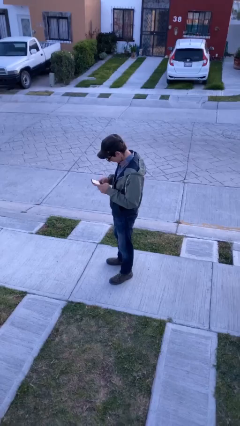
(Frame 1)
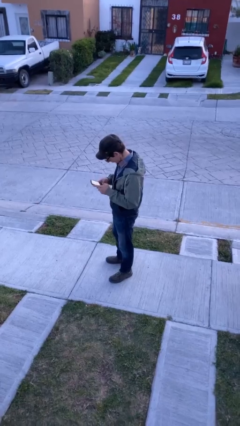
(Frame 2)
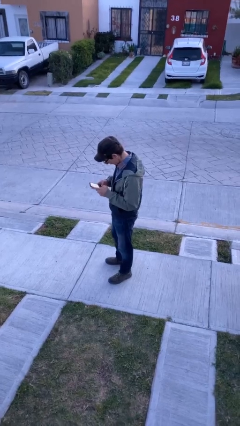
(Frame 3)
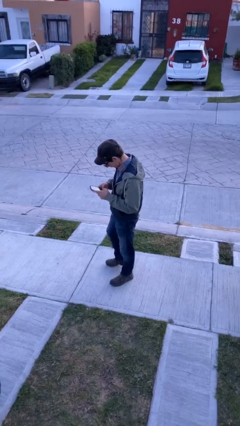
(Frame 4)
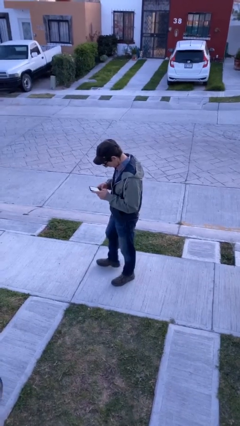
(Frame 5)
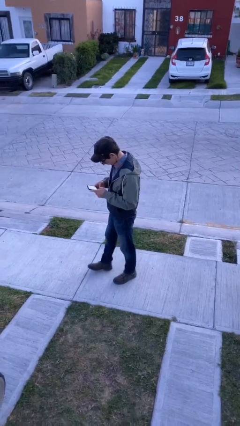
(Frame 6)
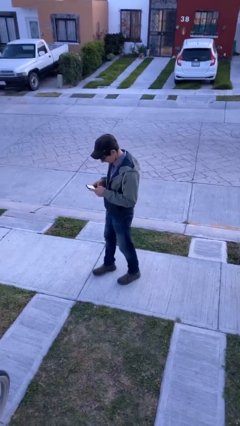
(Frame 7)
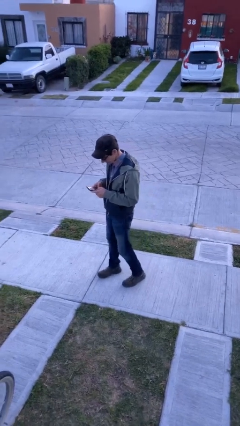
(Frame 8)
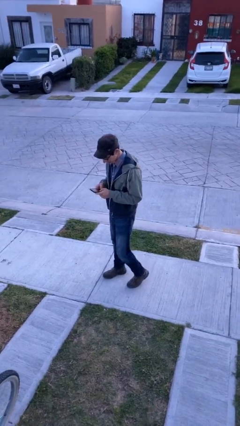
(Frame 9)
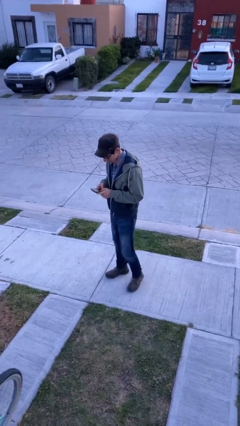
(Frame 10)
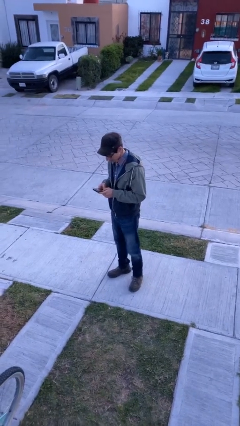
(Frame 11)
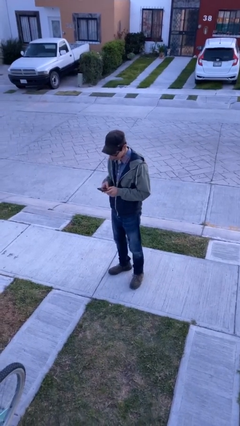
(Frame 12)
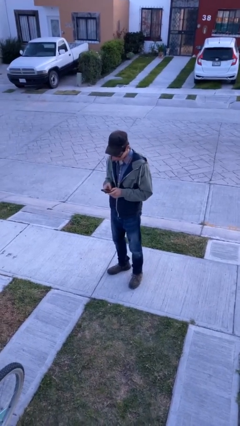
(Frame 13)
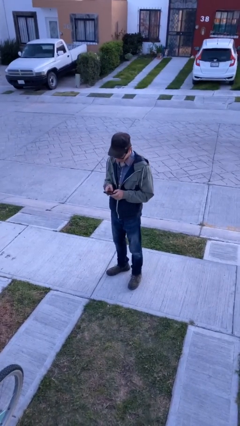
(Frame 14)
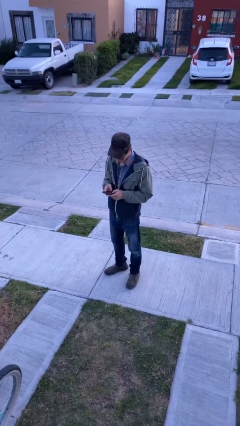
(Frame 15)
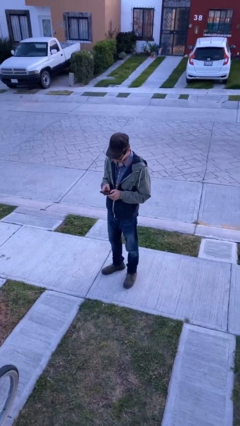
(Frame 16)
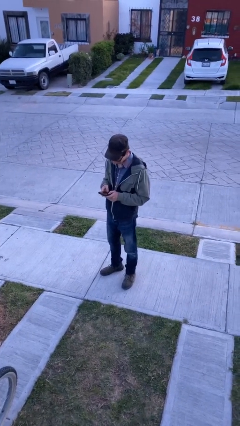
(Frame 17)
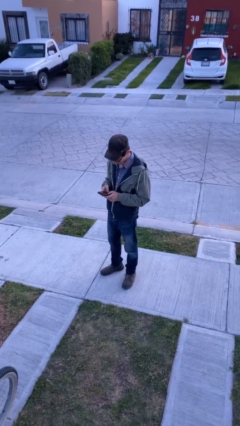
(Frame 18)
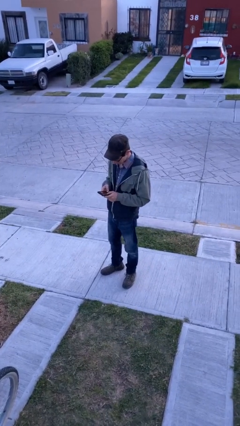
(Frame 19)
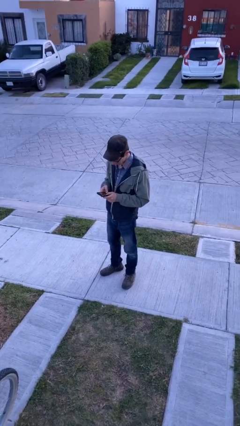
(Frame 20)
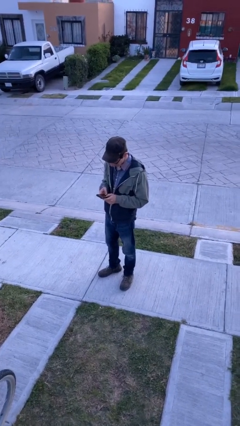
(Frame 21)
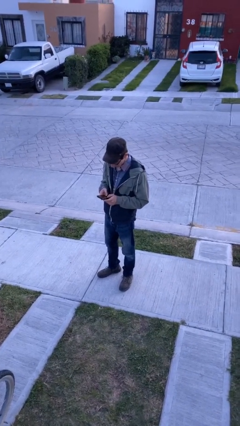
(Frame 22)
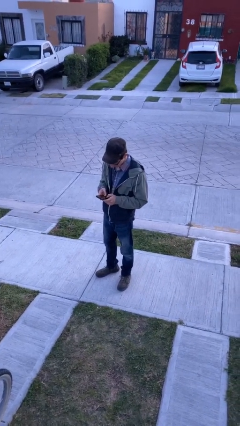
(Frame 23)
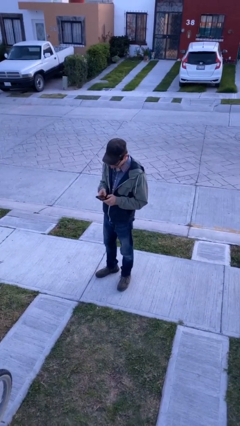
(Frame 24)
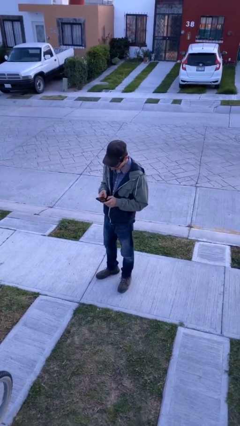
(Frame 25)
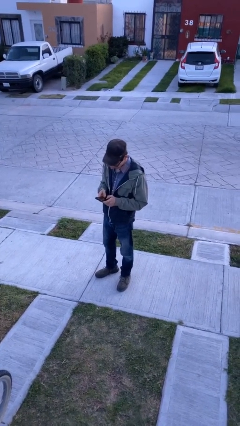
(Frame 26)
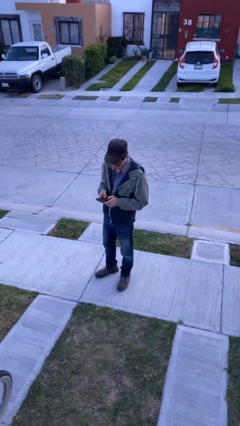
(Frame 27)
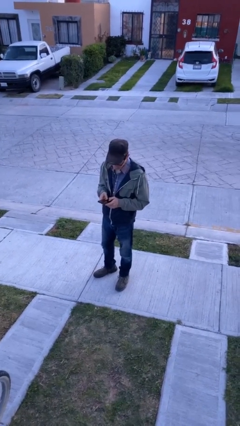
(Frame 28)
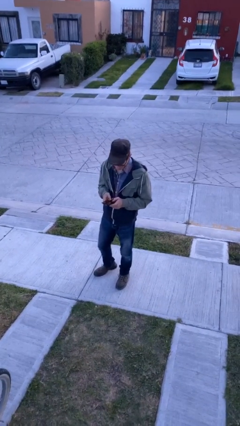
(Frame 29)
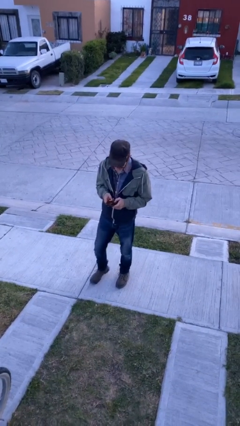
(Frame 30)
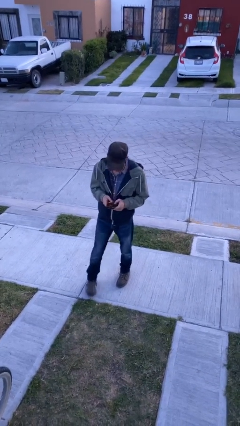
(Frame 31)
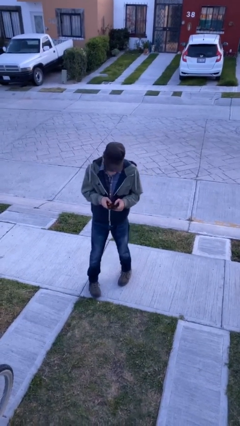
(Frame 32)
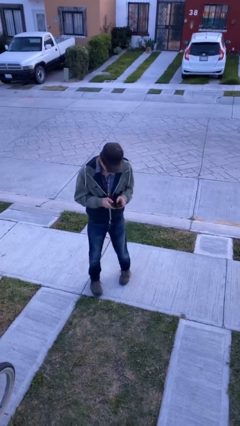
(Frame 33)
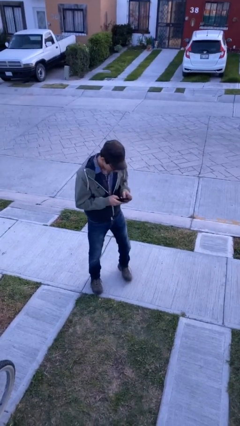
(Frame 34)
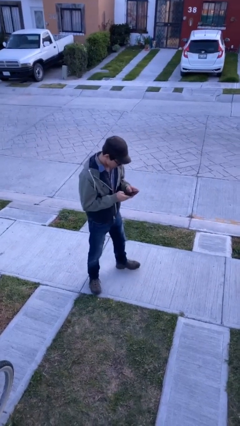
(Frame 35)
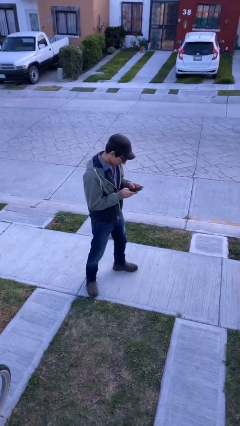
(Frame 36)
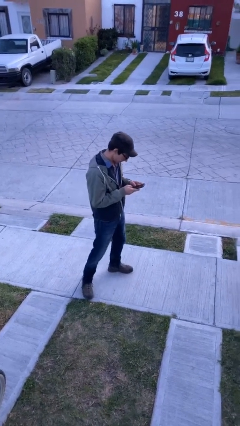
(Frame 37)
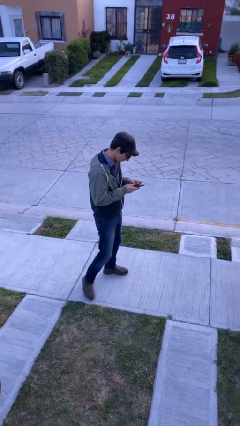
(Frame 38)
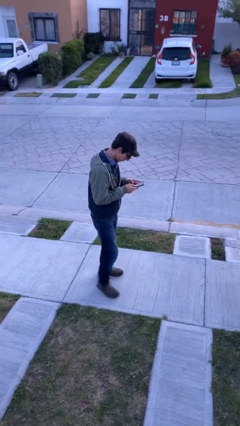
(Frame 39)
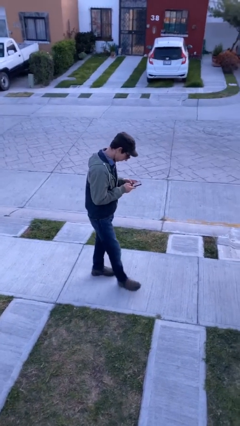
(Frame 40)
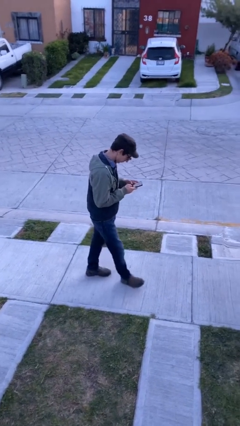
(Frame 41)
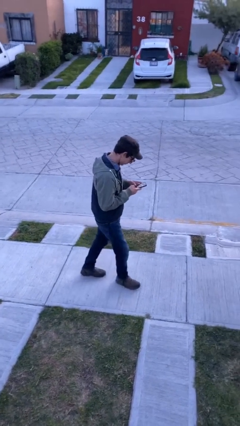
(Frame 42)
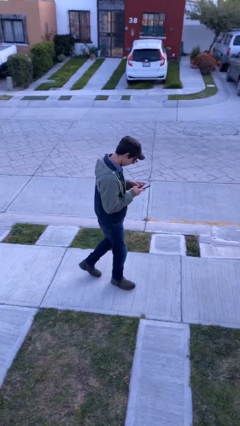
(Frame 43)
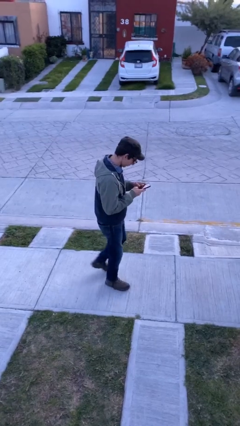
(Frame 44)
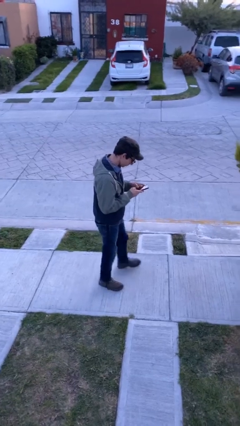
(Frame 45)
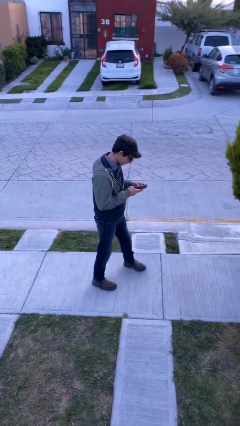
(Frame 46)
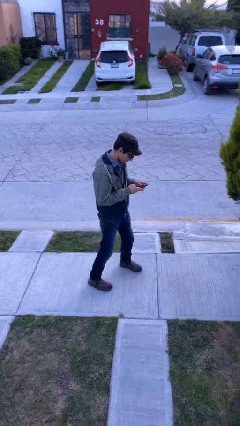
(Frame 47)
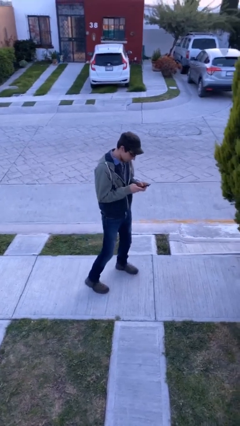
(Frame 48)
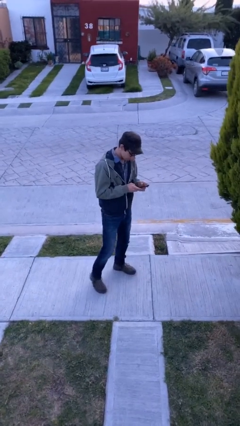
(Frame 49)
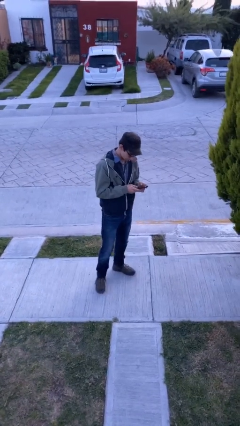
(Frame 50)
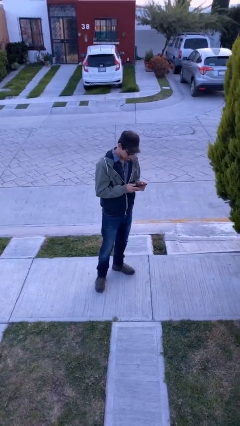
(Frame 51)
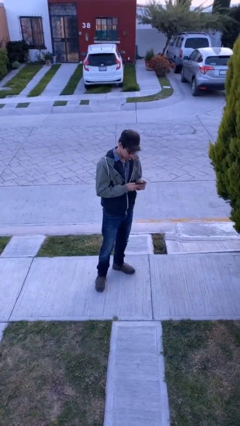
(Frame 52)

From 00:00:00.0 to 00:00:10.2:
person texts on phone

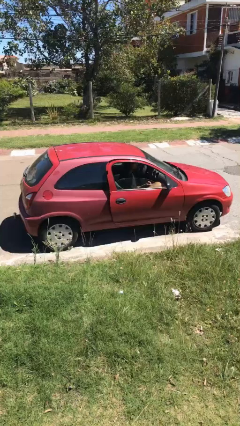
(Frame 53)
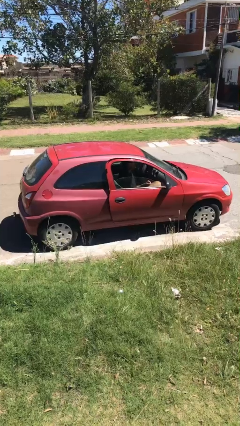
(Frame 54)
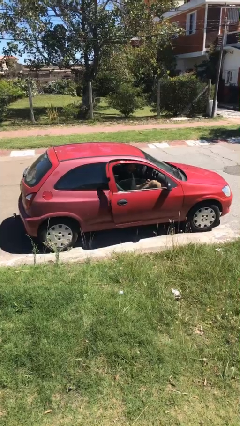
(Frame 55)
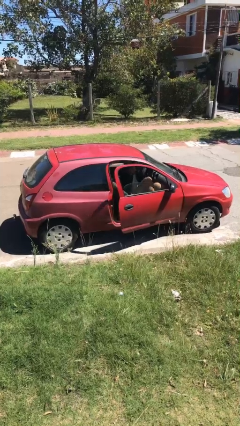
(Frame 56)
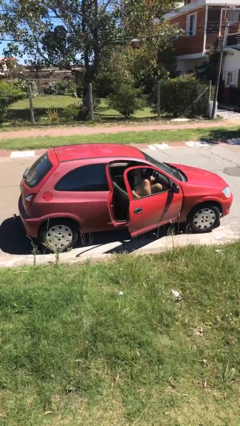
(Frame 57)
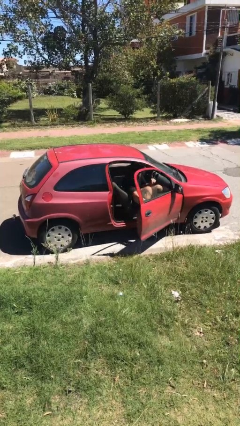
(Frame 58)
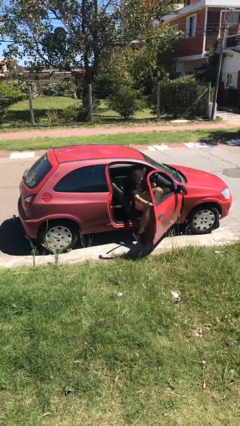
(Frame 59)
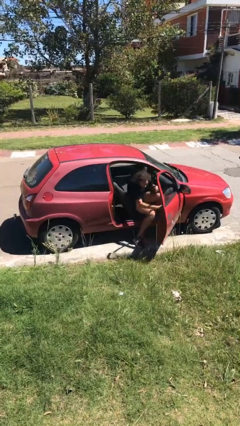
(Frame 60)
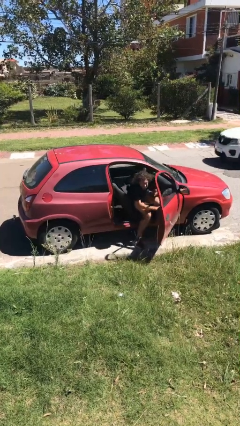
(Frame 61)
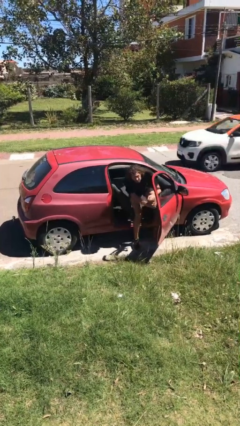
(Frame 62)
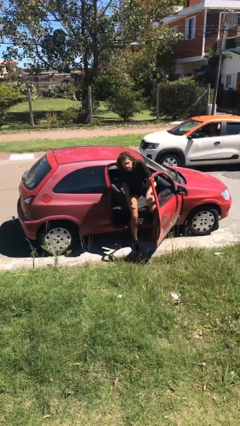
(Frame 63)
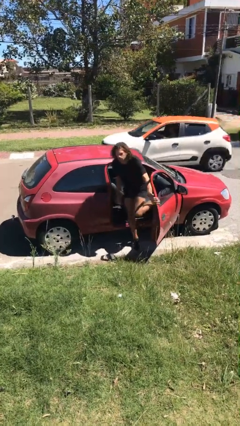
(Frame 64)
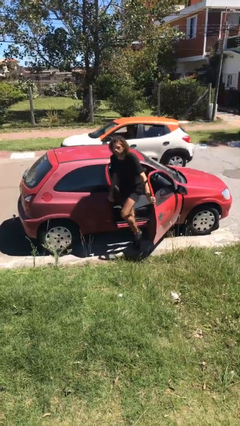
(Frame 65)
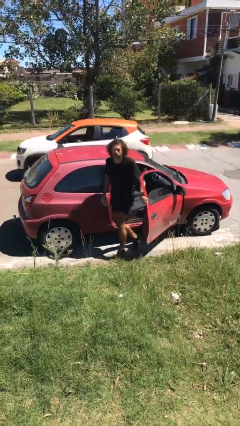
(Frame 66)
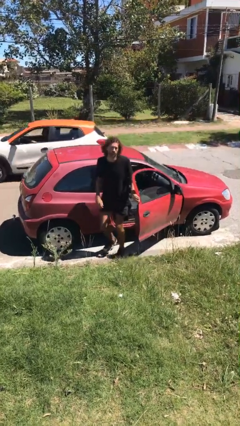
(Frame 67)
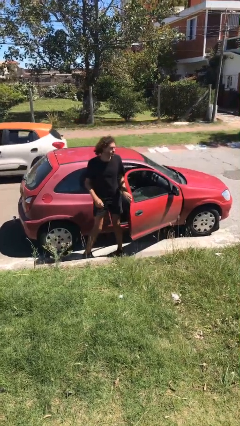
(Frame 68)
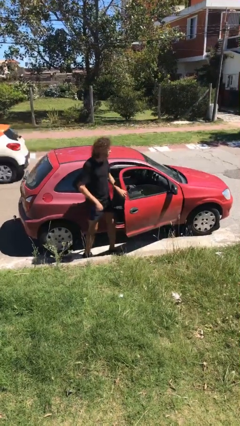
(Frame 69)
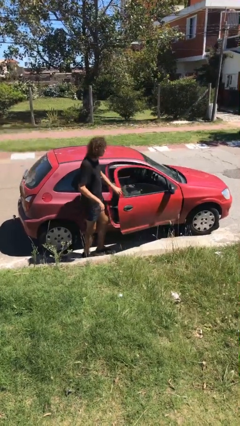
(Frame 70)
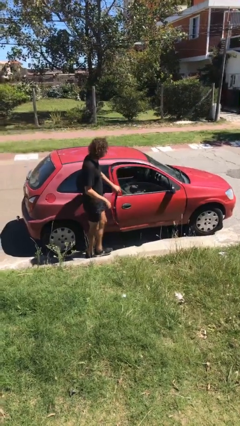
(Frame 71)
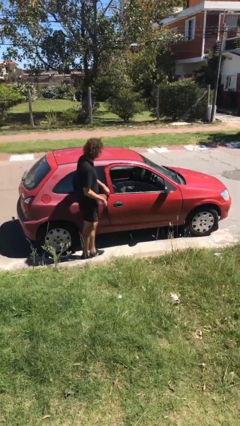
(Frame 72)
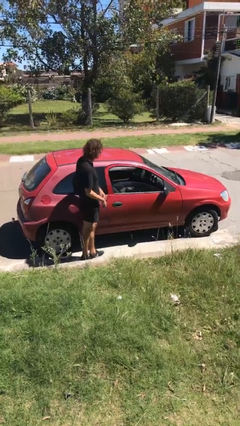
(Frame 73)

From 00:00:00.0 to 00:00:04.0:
car drops off person

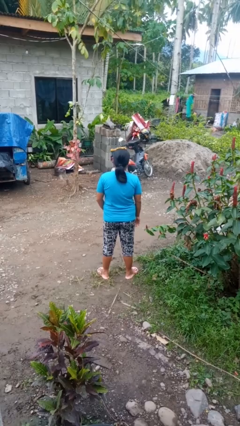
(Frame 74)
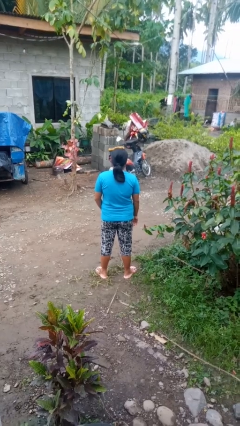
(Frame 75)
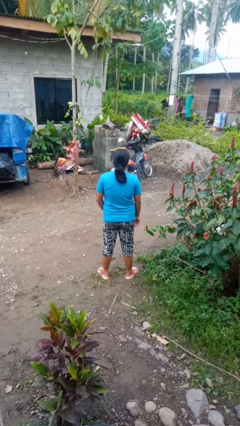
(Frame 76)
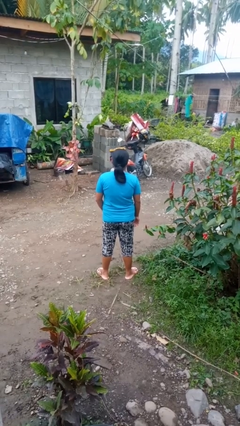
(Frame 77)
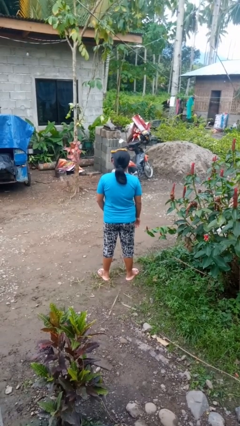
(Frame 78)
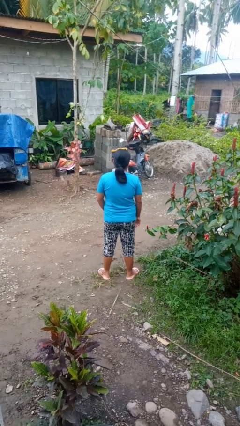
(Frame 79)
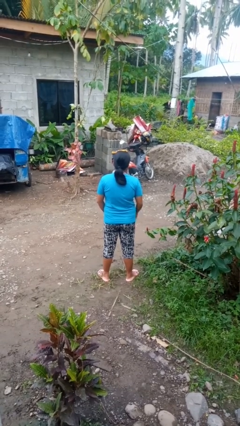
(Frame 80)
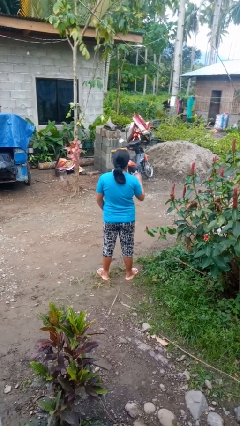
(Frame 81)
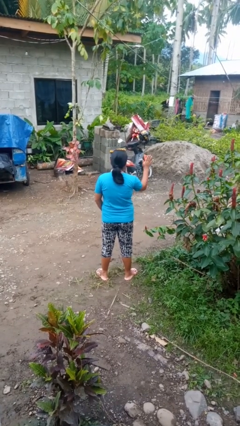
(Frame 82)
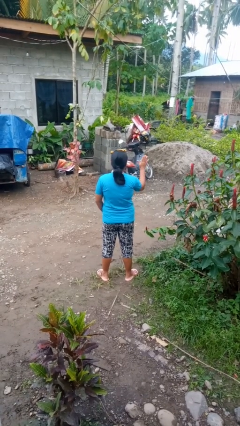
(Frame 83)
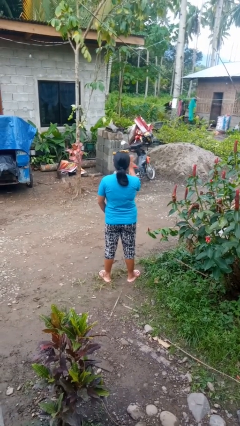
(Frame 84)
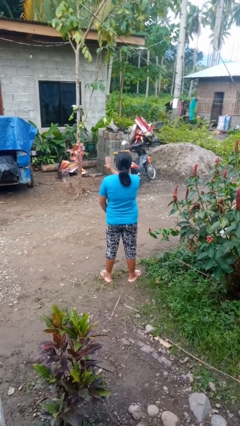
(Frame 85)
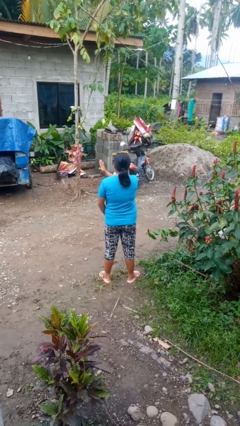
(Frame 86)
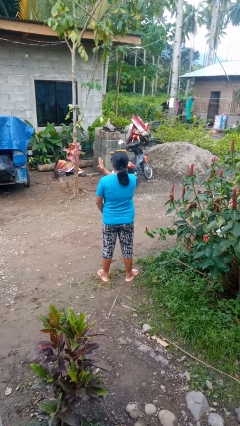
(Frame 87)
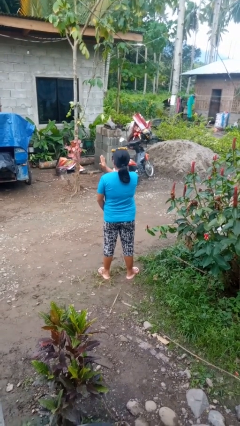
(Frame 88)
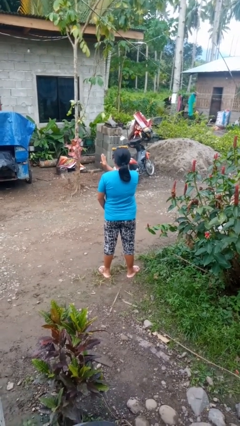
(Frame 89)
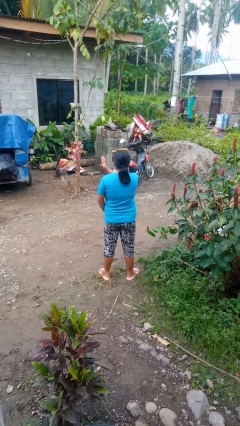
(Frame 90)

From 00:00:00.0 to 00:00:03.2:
person gestures swipe left

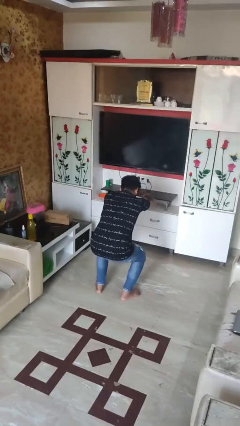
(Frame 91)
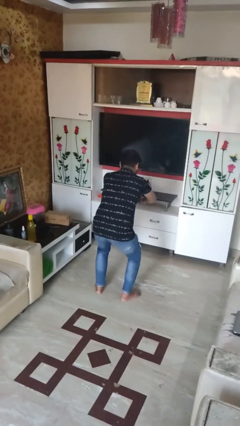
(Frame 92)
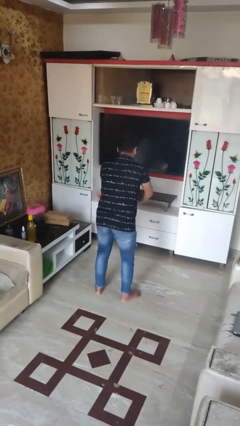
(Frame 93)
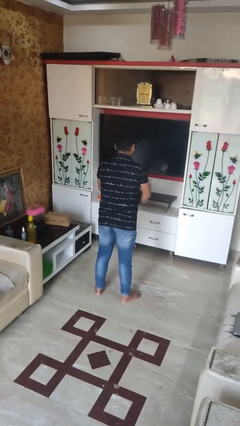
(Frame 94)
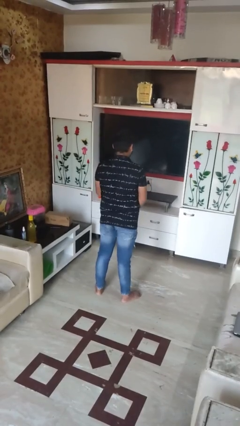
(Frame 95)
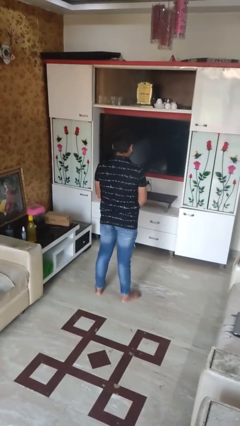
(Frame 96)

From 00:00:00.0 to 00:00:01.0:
person stands up
